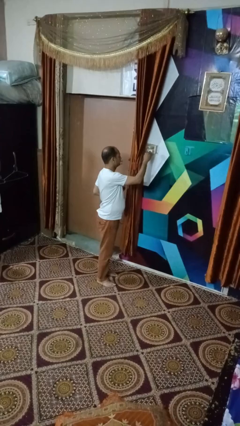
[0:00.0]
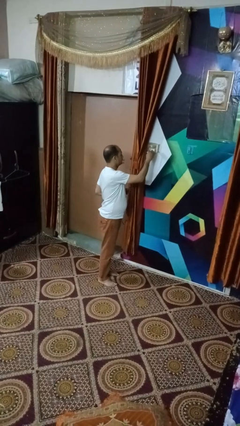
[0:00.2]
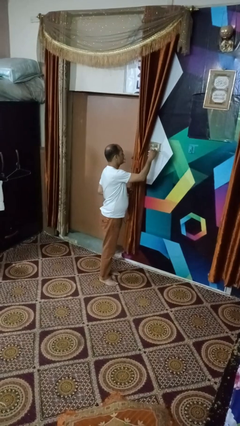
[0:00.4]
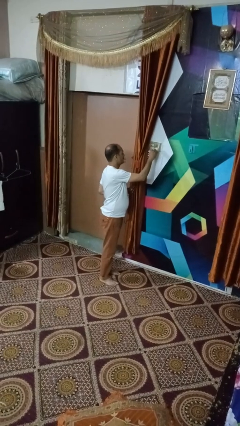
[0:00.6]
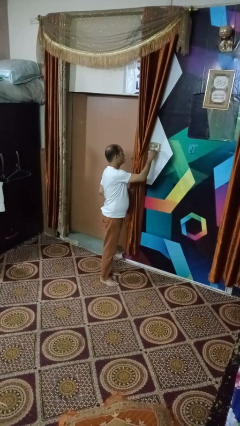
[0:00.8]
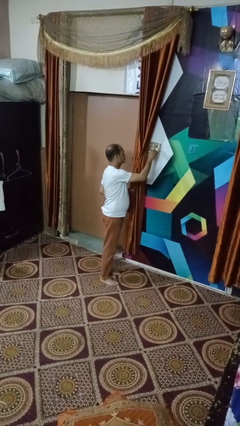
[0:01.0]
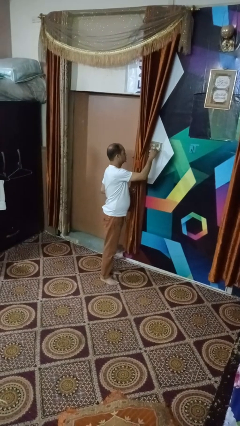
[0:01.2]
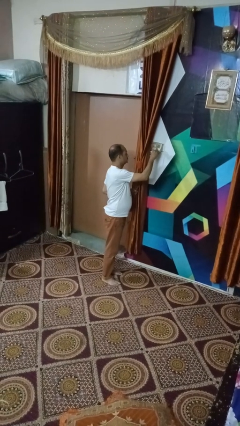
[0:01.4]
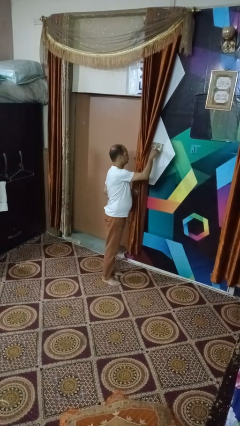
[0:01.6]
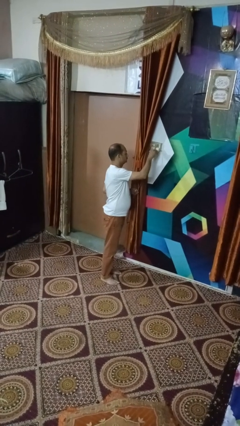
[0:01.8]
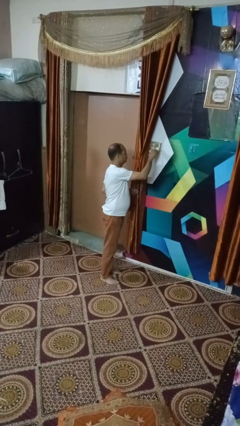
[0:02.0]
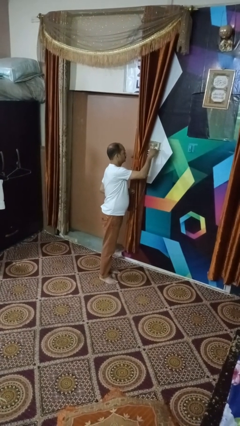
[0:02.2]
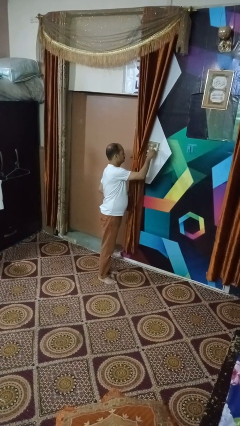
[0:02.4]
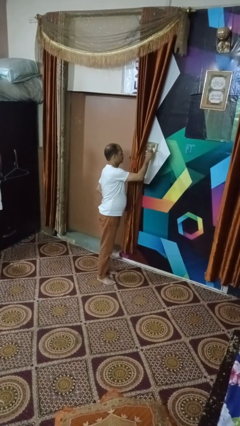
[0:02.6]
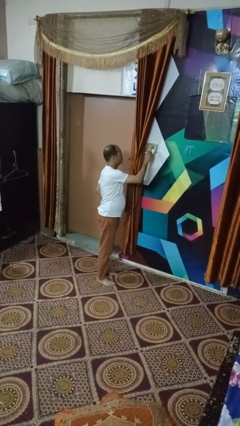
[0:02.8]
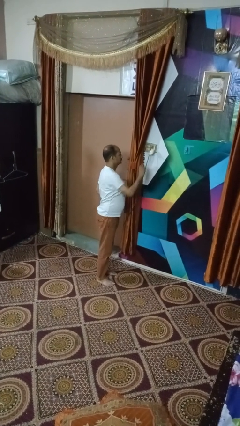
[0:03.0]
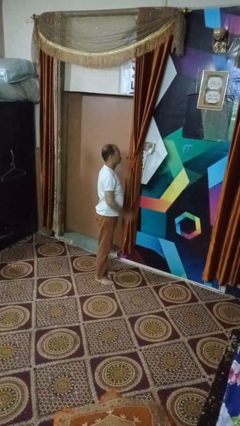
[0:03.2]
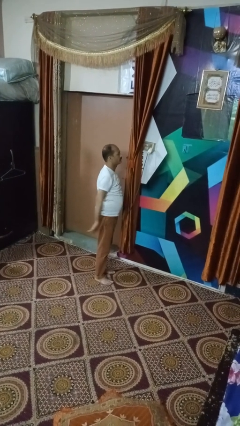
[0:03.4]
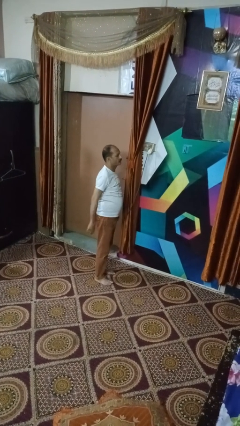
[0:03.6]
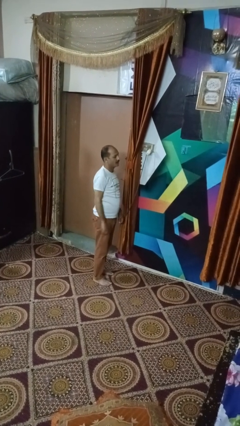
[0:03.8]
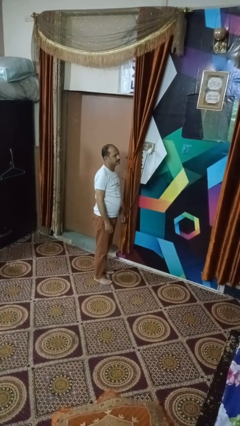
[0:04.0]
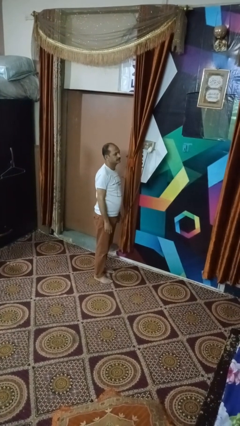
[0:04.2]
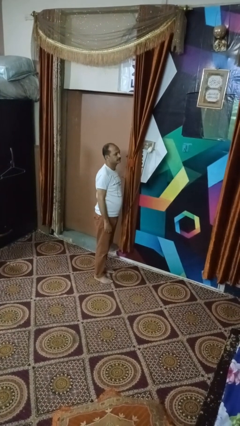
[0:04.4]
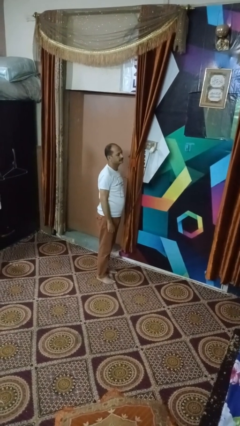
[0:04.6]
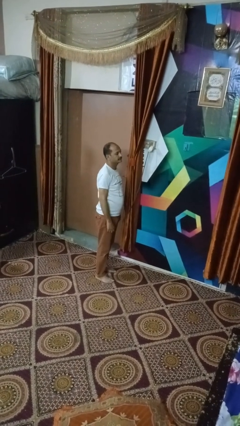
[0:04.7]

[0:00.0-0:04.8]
person plugs into electrical socket

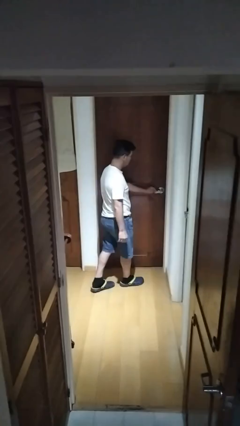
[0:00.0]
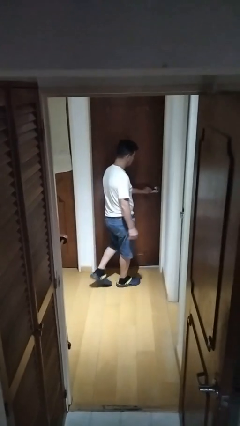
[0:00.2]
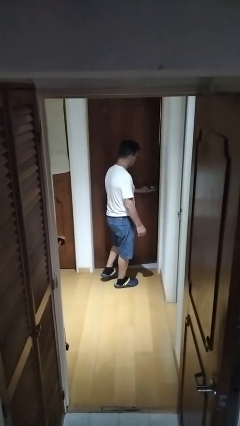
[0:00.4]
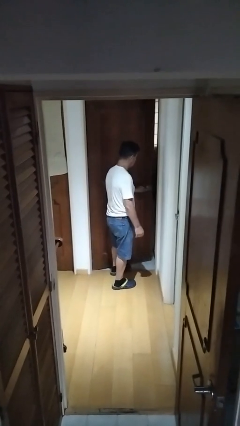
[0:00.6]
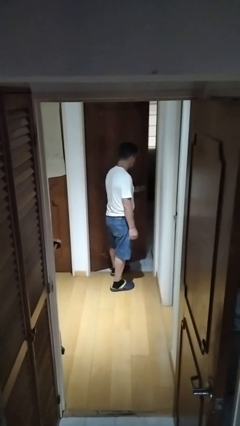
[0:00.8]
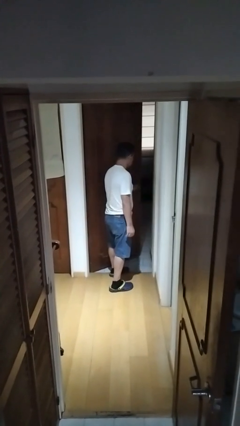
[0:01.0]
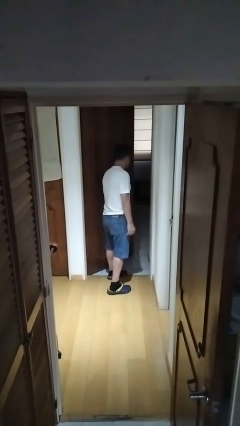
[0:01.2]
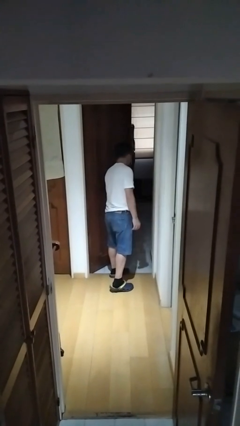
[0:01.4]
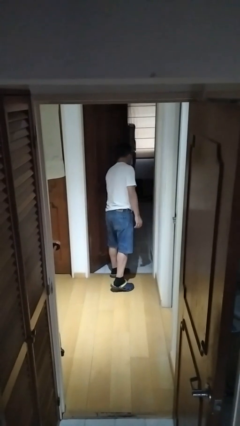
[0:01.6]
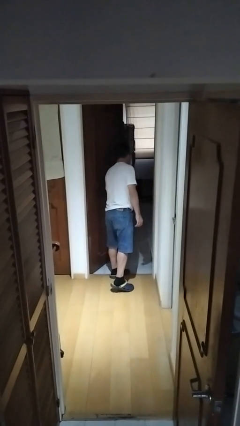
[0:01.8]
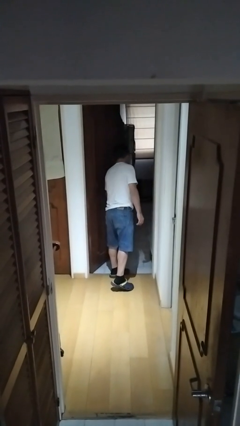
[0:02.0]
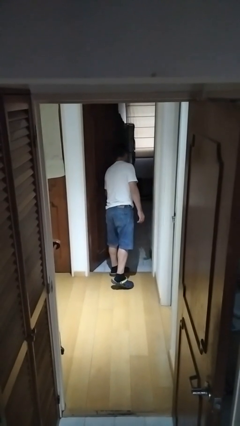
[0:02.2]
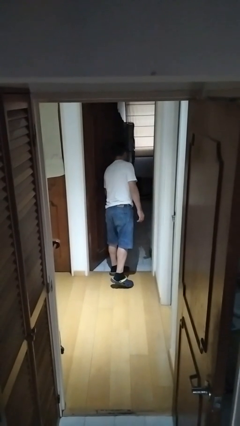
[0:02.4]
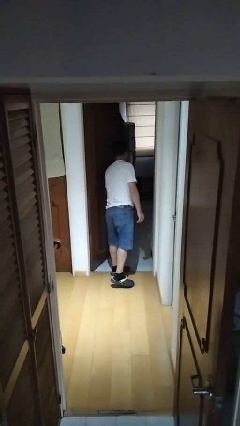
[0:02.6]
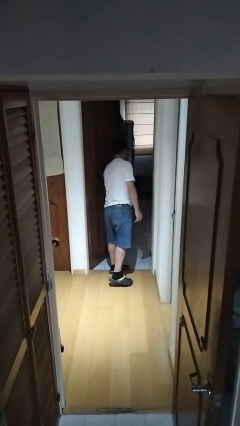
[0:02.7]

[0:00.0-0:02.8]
person opens facility door

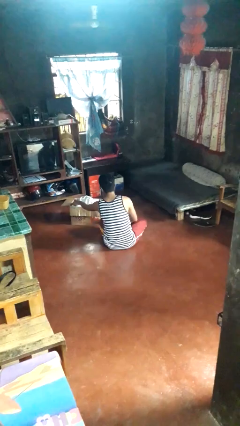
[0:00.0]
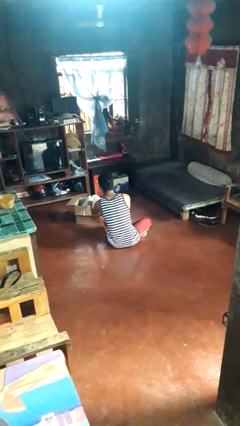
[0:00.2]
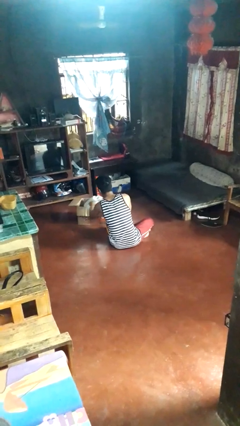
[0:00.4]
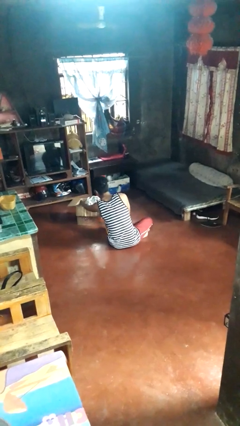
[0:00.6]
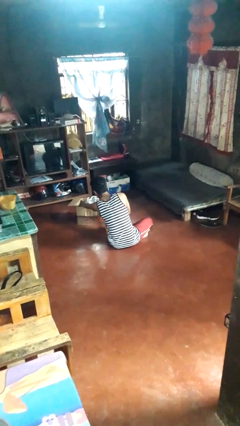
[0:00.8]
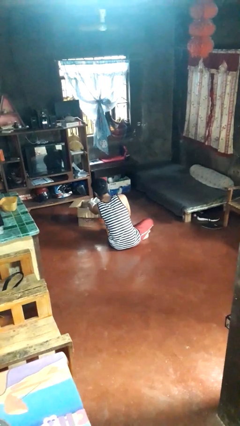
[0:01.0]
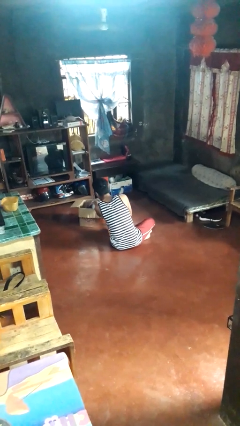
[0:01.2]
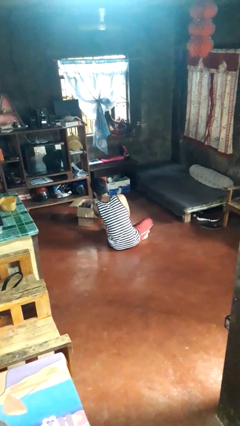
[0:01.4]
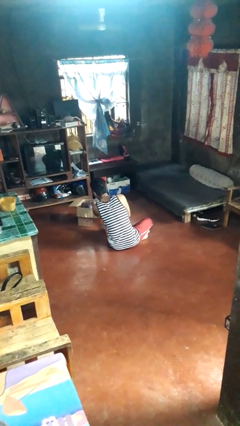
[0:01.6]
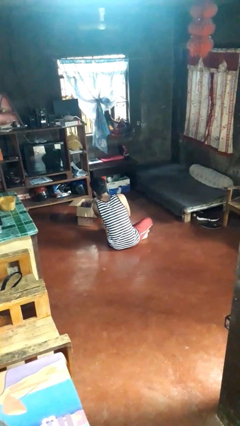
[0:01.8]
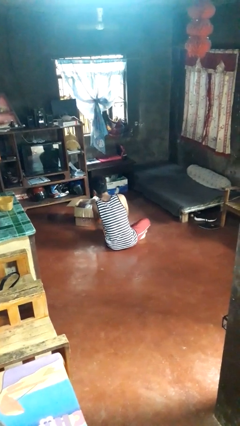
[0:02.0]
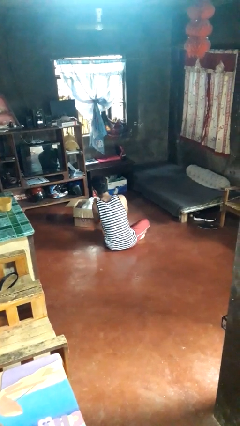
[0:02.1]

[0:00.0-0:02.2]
person searches in box

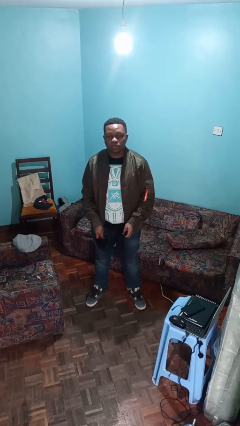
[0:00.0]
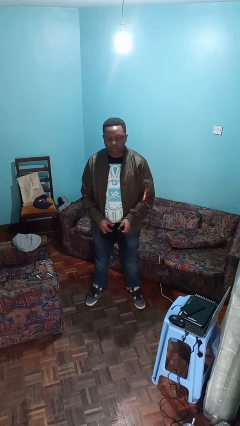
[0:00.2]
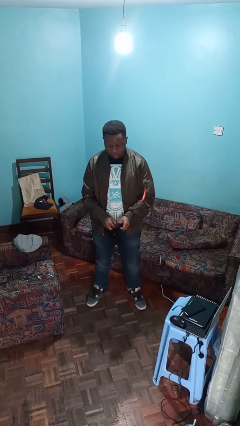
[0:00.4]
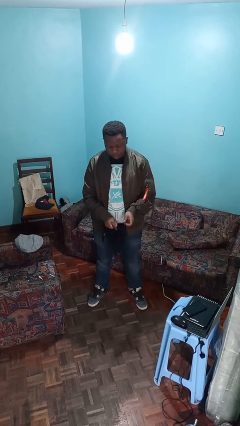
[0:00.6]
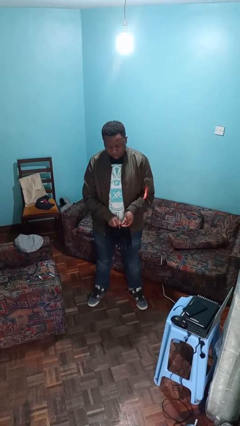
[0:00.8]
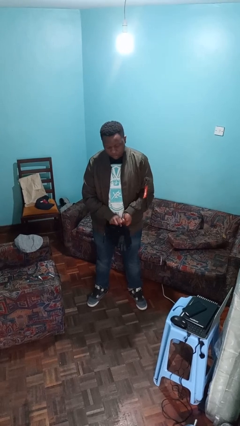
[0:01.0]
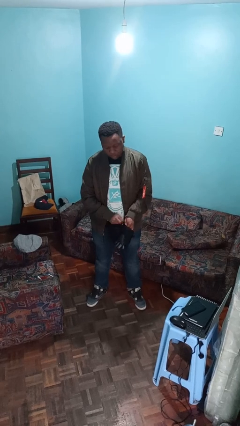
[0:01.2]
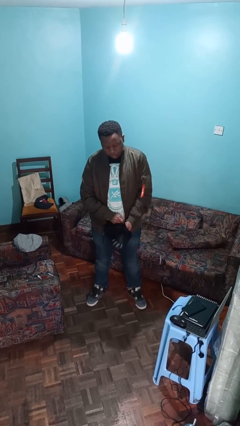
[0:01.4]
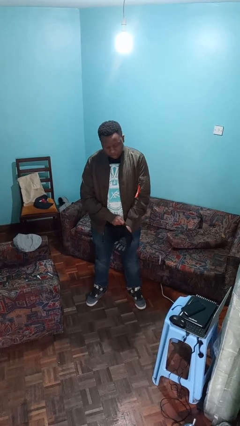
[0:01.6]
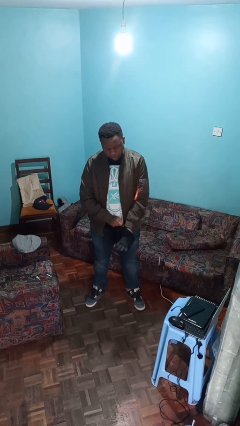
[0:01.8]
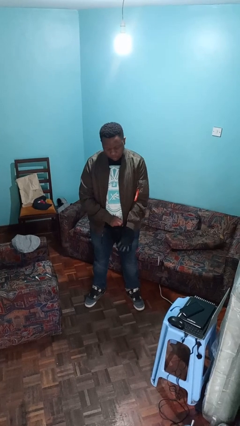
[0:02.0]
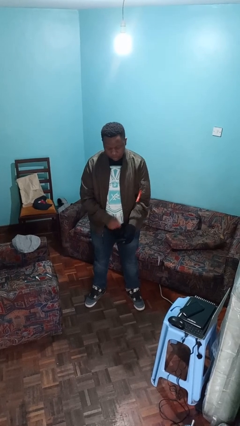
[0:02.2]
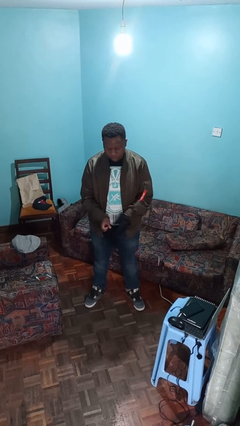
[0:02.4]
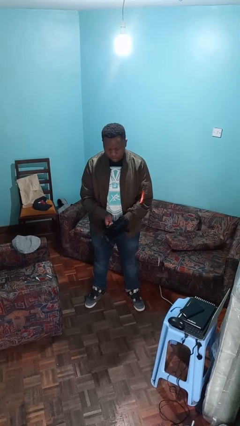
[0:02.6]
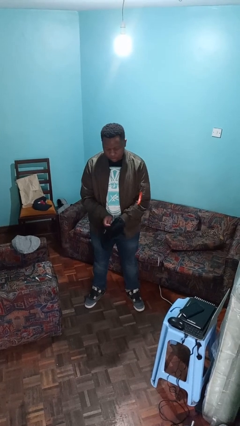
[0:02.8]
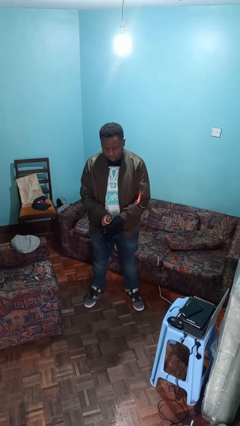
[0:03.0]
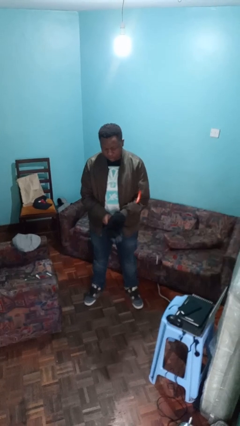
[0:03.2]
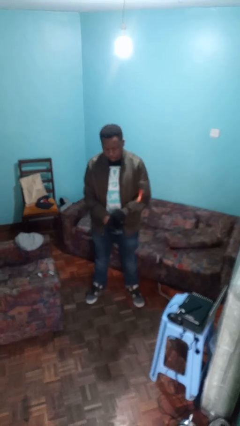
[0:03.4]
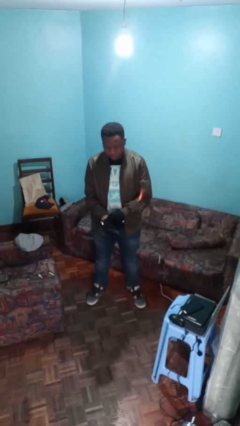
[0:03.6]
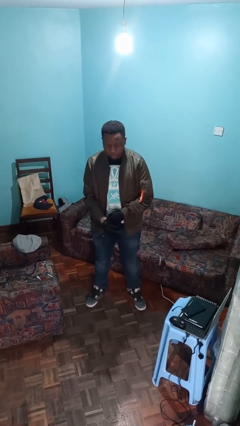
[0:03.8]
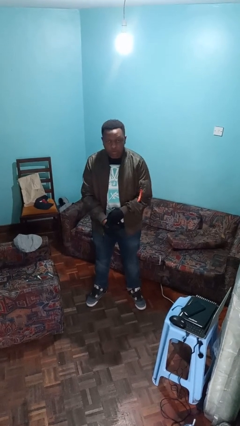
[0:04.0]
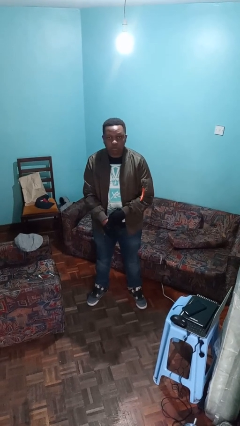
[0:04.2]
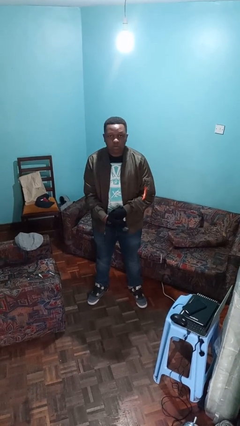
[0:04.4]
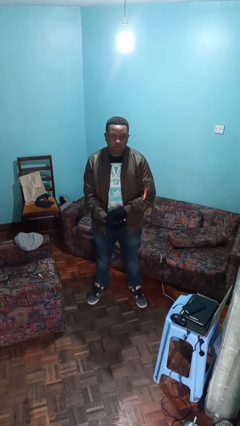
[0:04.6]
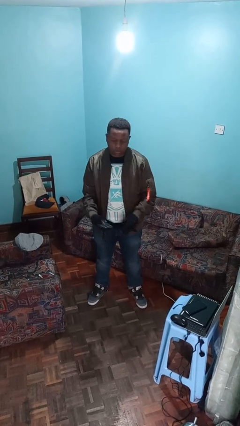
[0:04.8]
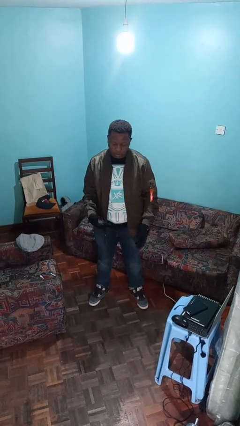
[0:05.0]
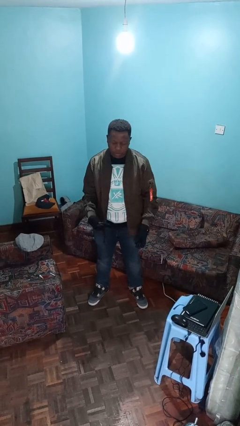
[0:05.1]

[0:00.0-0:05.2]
person puts on gloves

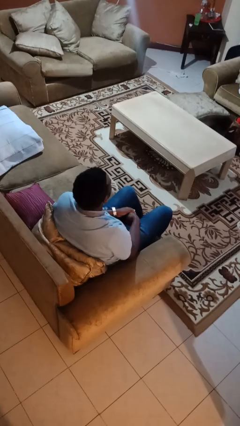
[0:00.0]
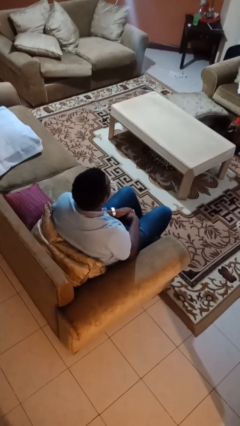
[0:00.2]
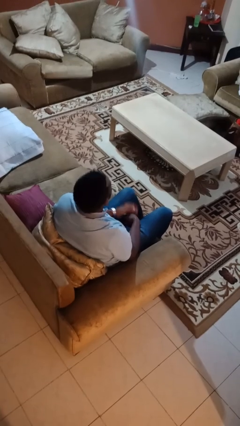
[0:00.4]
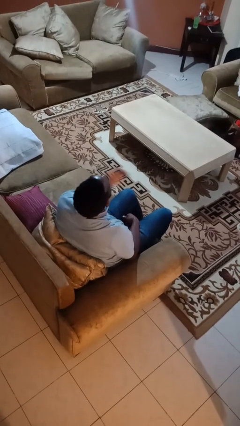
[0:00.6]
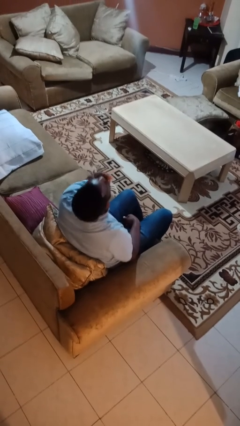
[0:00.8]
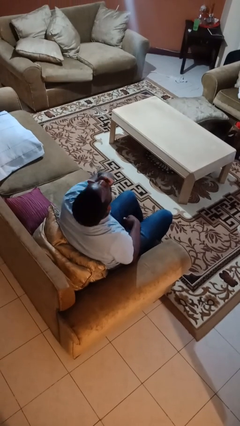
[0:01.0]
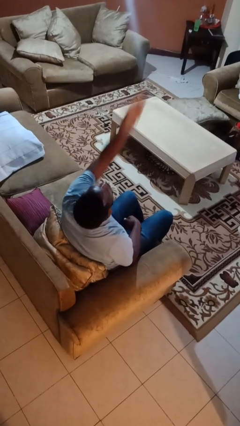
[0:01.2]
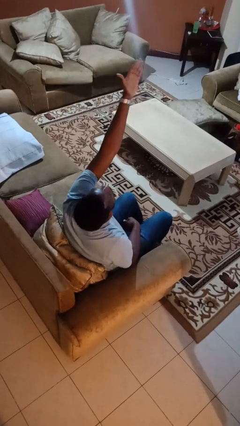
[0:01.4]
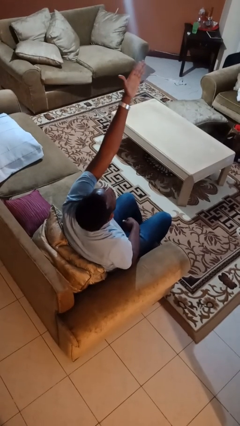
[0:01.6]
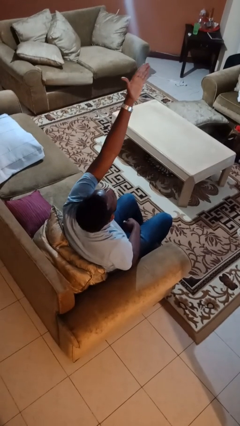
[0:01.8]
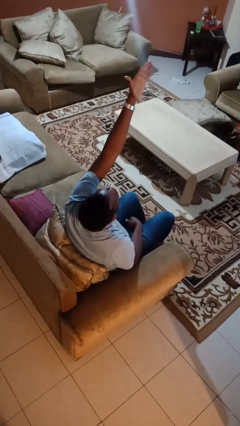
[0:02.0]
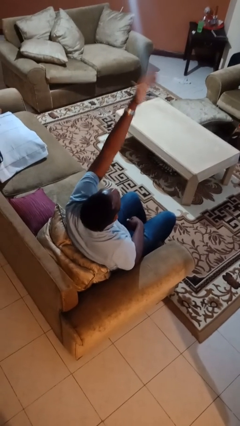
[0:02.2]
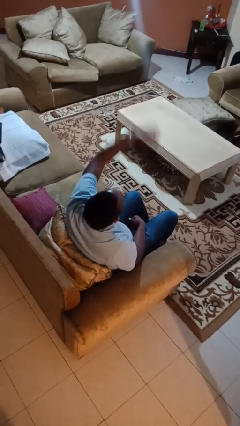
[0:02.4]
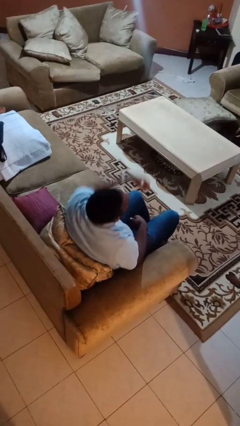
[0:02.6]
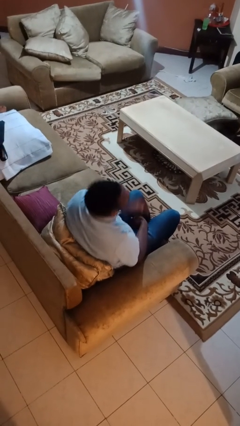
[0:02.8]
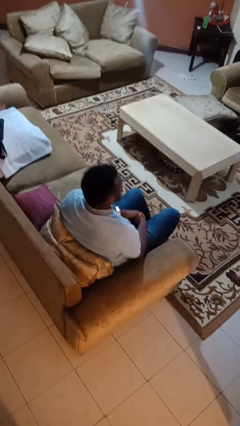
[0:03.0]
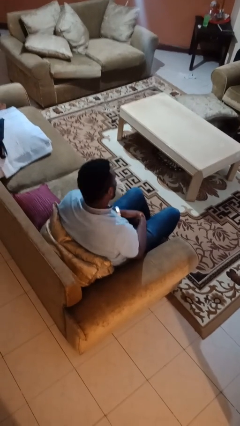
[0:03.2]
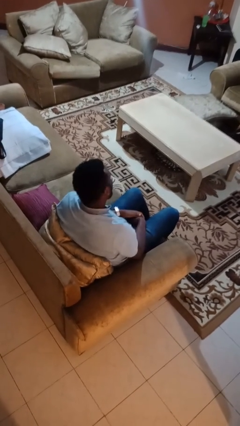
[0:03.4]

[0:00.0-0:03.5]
person gestures blow kiss
